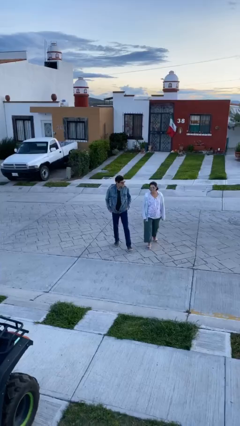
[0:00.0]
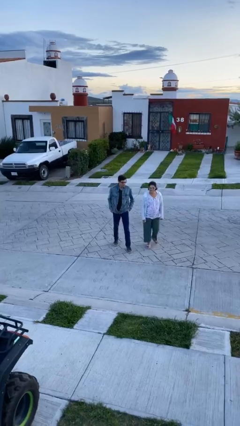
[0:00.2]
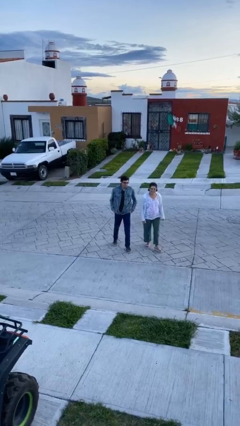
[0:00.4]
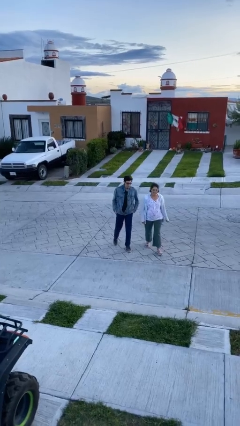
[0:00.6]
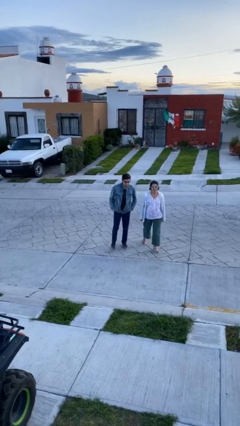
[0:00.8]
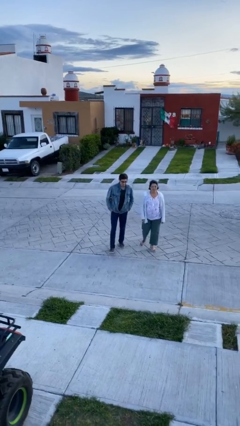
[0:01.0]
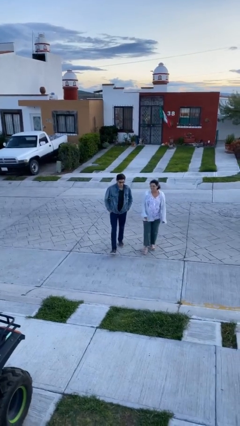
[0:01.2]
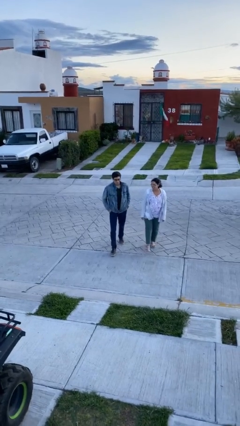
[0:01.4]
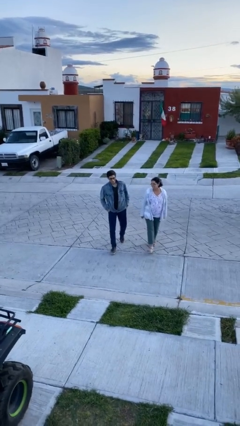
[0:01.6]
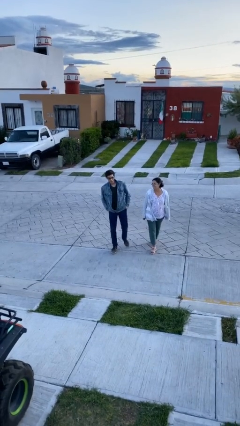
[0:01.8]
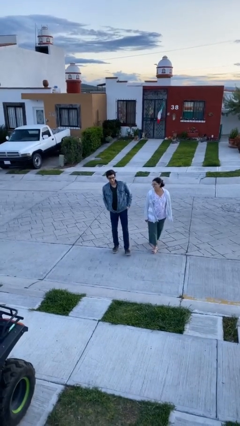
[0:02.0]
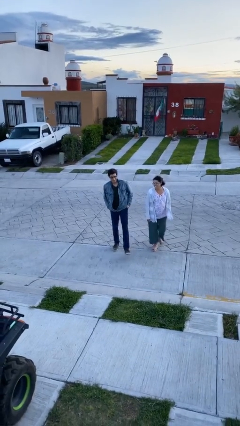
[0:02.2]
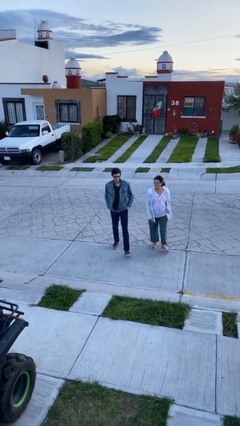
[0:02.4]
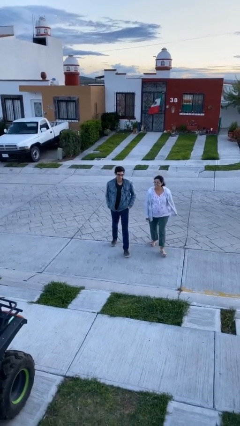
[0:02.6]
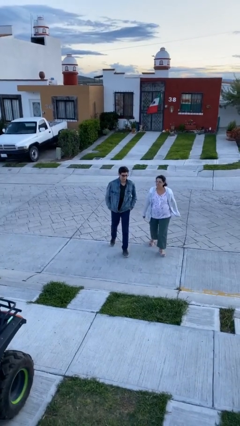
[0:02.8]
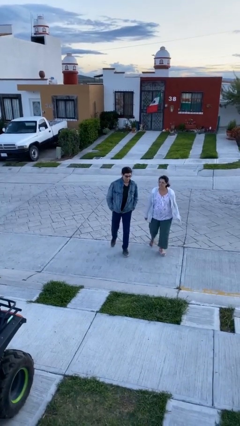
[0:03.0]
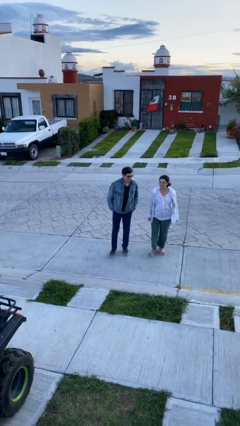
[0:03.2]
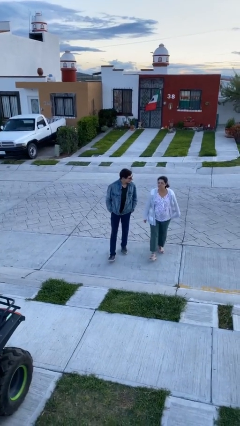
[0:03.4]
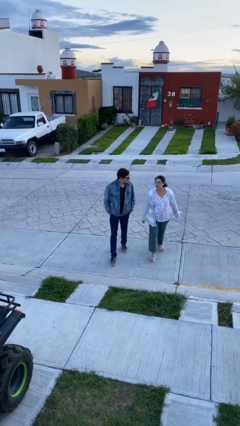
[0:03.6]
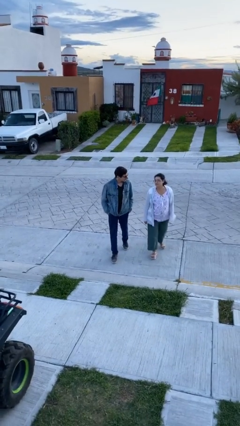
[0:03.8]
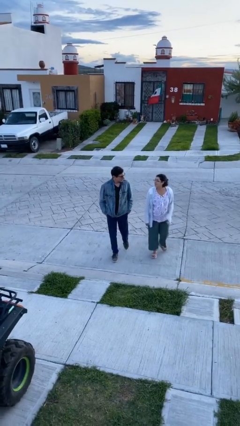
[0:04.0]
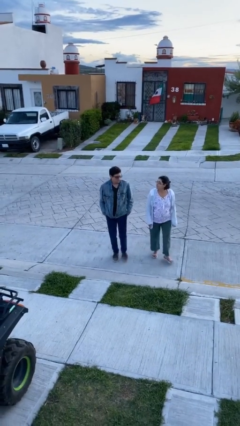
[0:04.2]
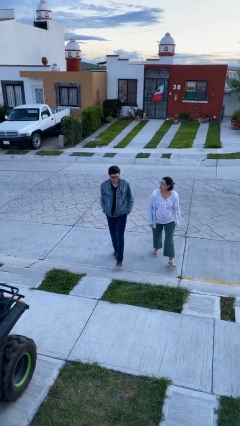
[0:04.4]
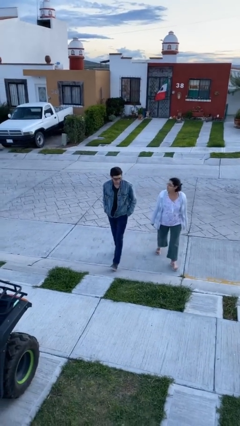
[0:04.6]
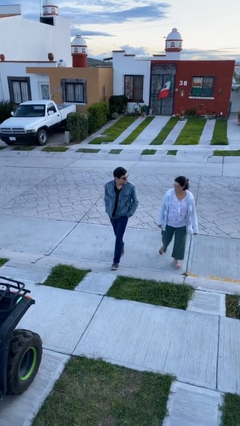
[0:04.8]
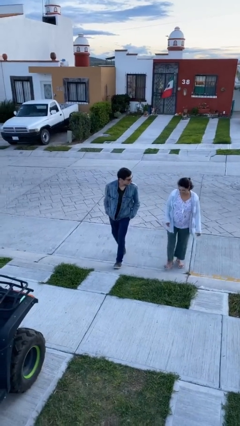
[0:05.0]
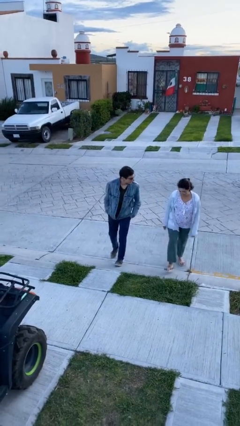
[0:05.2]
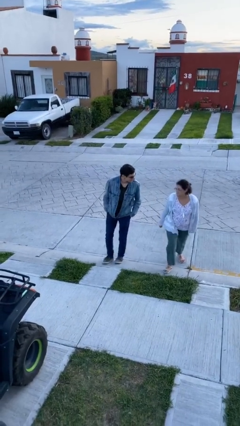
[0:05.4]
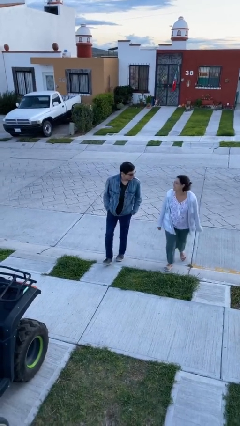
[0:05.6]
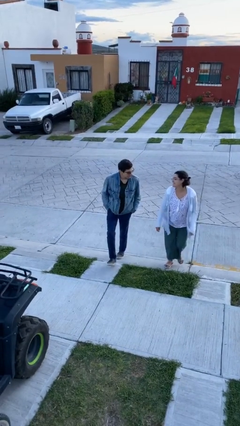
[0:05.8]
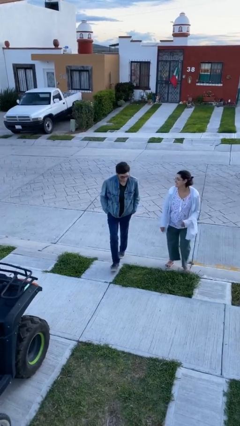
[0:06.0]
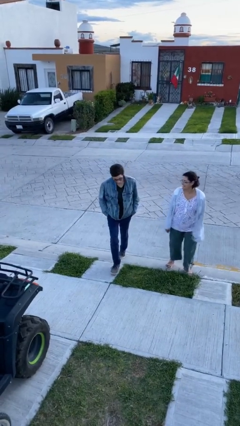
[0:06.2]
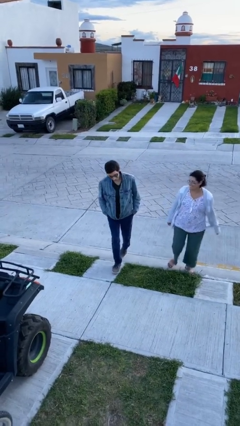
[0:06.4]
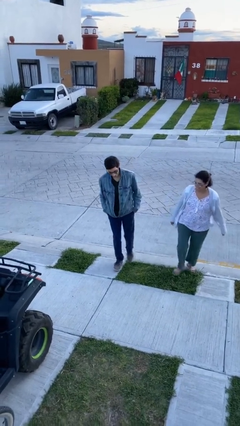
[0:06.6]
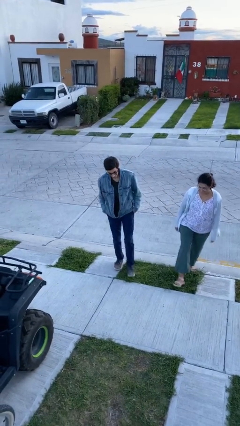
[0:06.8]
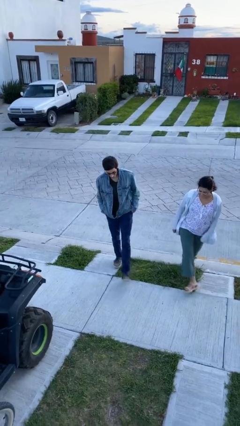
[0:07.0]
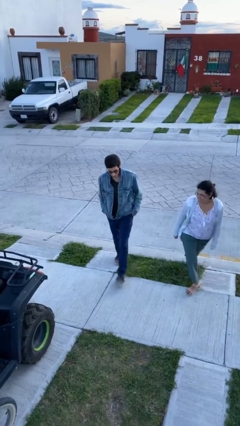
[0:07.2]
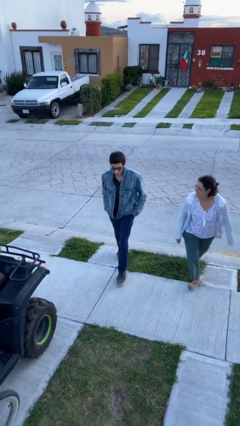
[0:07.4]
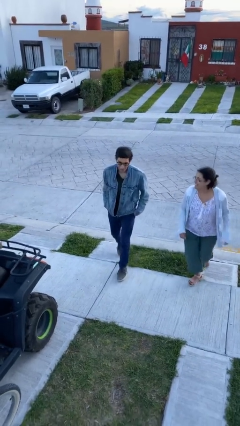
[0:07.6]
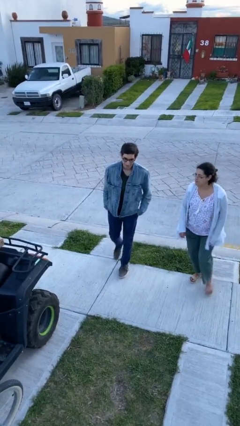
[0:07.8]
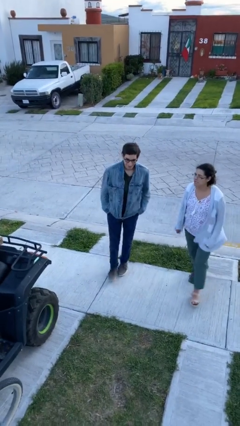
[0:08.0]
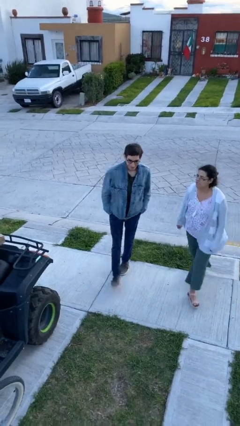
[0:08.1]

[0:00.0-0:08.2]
person talks to person

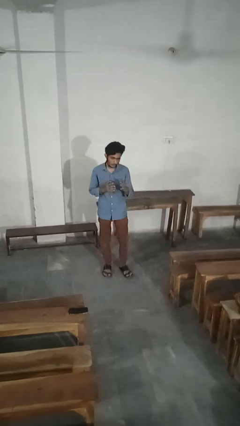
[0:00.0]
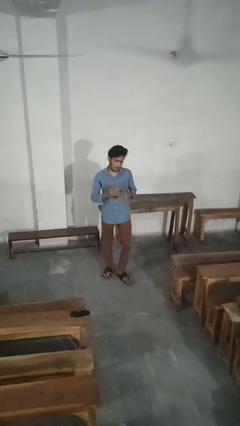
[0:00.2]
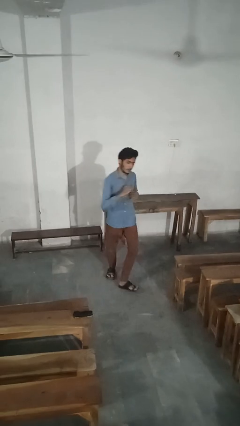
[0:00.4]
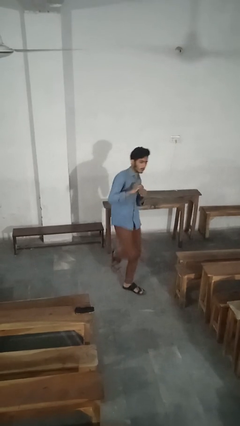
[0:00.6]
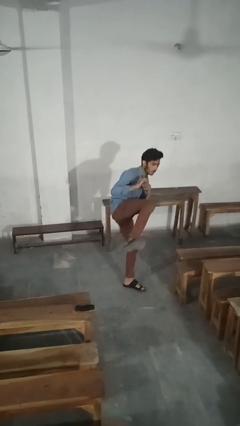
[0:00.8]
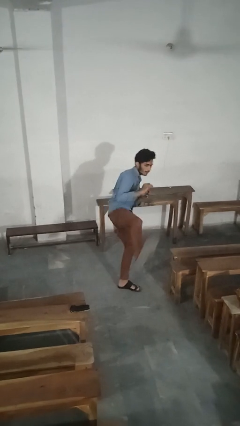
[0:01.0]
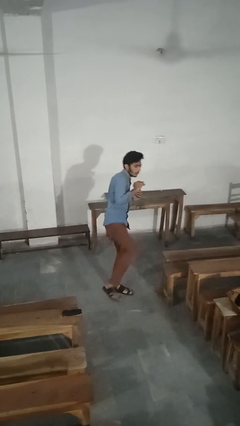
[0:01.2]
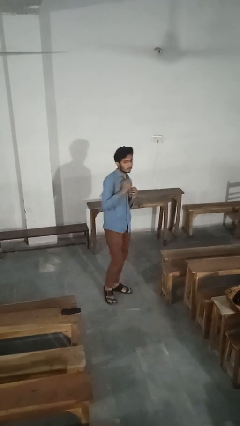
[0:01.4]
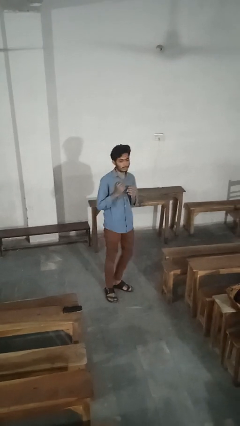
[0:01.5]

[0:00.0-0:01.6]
person karate kicks

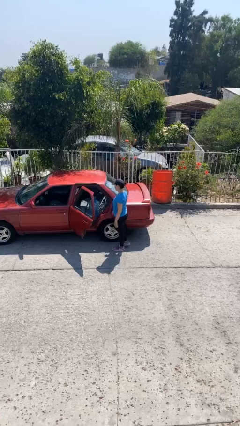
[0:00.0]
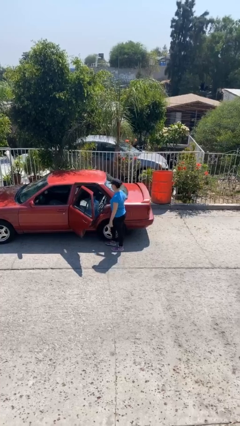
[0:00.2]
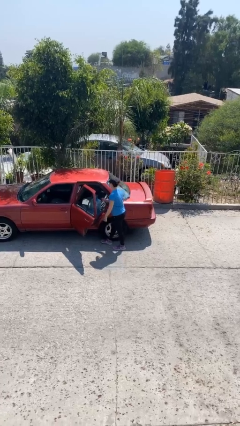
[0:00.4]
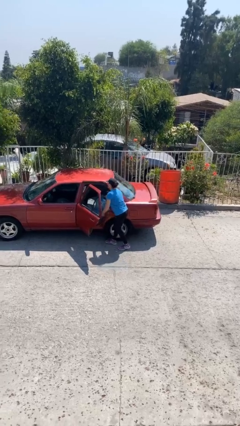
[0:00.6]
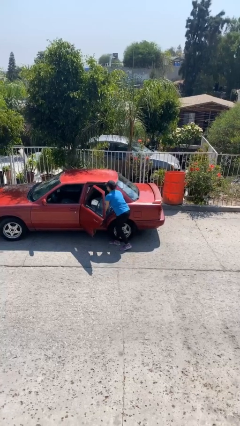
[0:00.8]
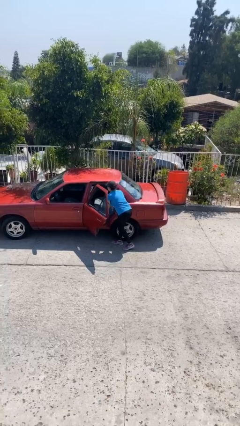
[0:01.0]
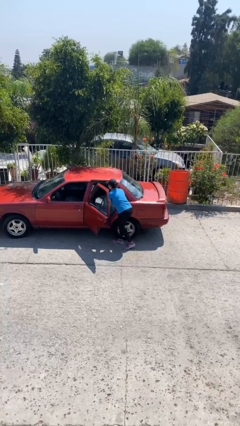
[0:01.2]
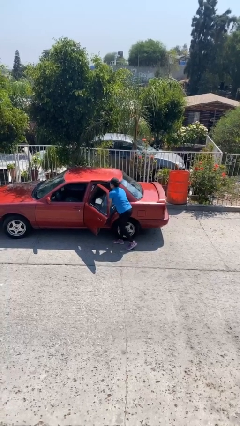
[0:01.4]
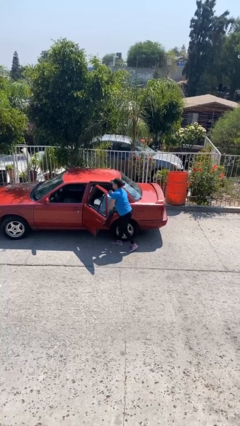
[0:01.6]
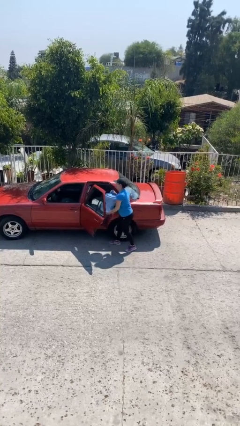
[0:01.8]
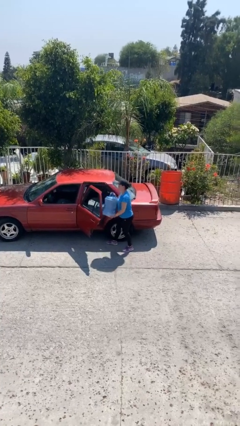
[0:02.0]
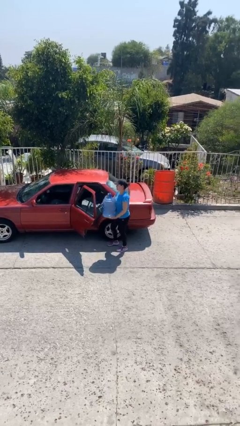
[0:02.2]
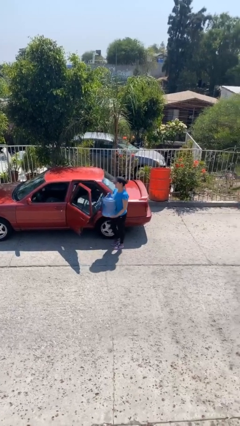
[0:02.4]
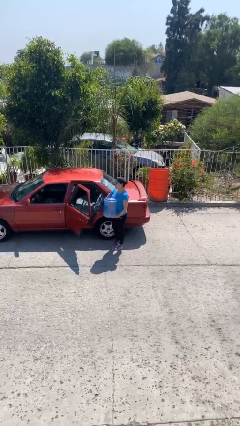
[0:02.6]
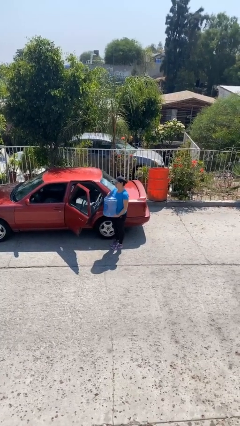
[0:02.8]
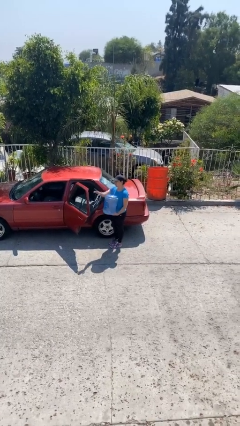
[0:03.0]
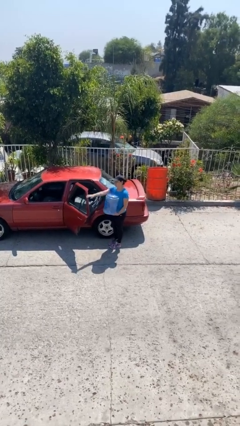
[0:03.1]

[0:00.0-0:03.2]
person unloads car

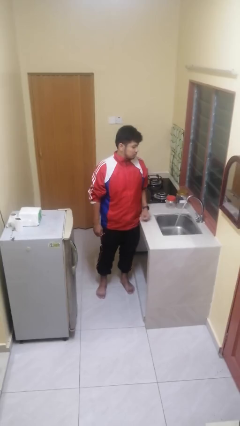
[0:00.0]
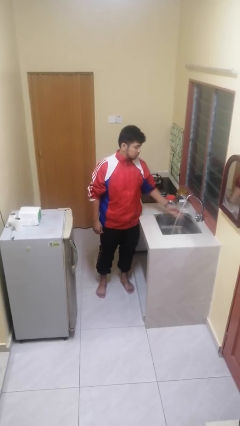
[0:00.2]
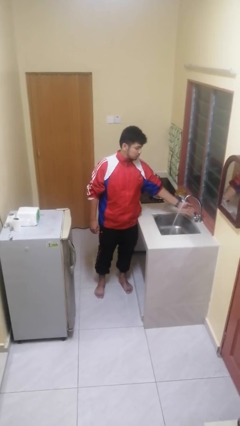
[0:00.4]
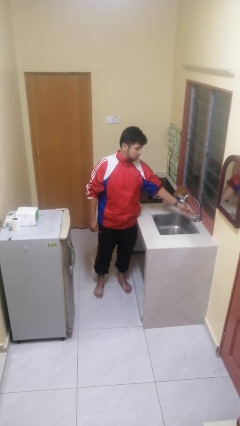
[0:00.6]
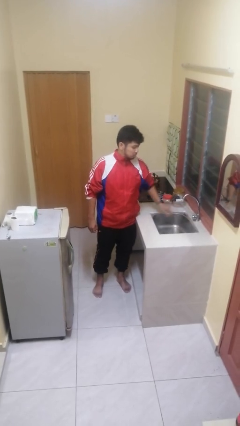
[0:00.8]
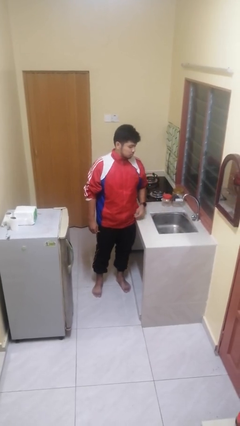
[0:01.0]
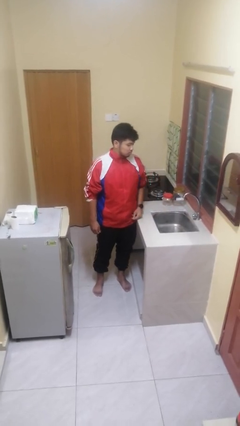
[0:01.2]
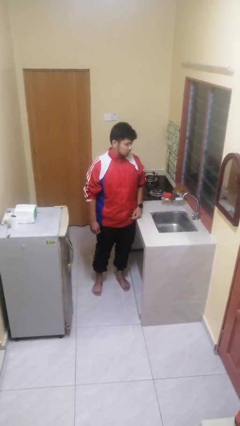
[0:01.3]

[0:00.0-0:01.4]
person turns off faucet

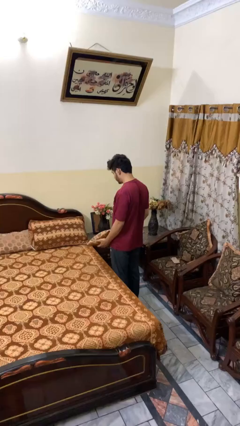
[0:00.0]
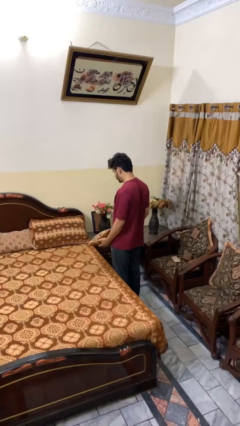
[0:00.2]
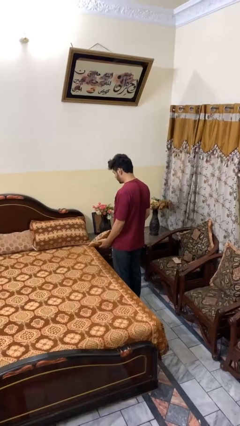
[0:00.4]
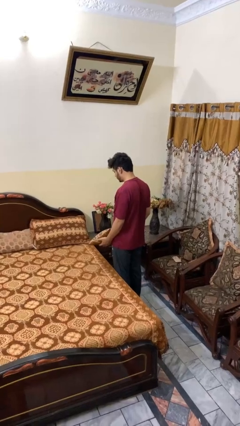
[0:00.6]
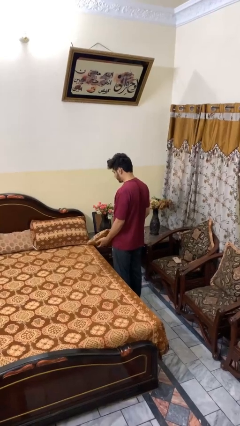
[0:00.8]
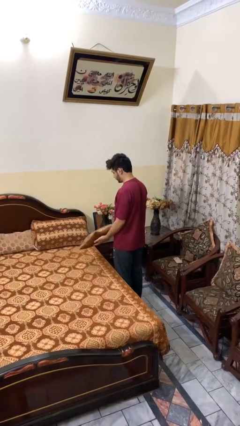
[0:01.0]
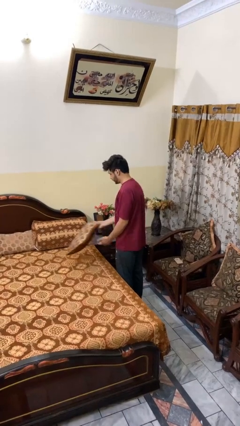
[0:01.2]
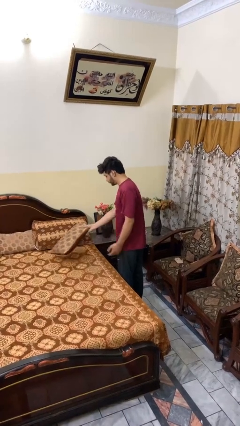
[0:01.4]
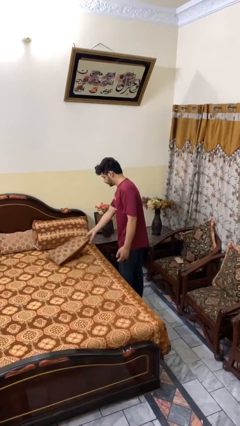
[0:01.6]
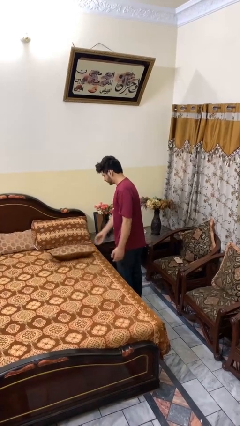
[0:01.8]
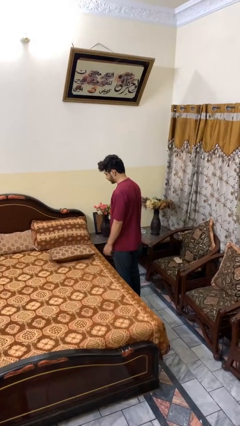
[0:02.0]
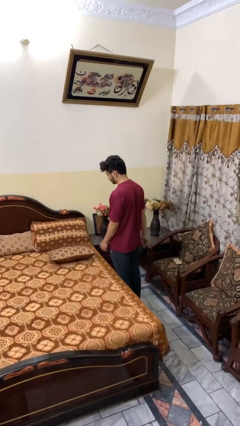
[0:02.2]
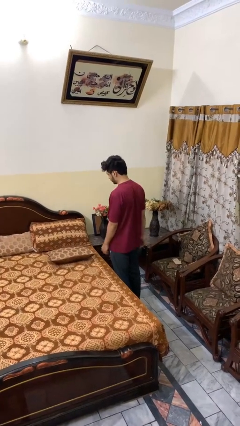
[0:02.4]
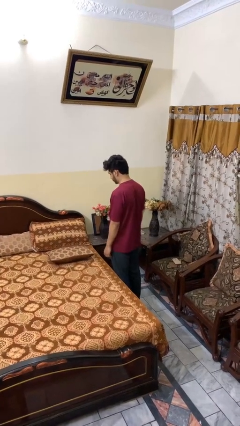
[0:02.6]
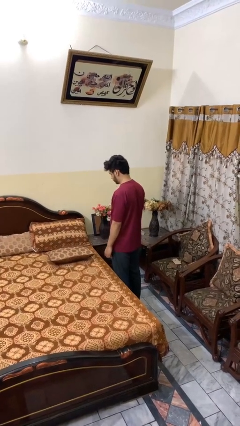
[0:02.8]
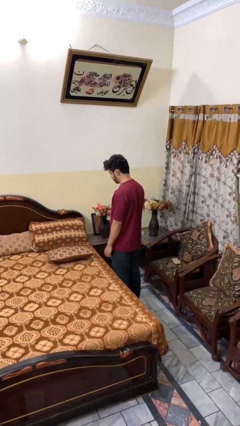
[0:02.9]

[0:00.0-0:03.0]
person puts down object on bed

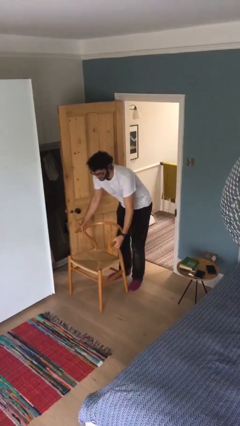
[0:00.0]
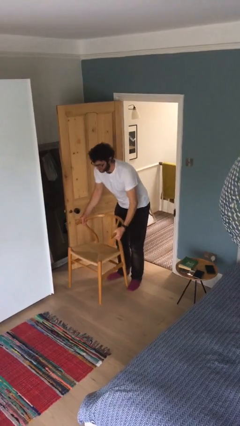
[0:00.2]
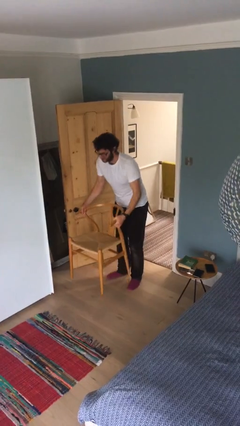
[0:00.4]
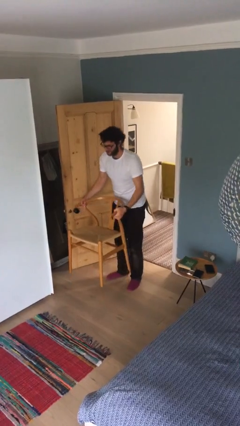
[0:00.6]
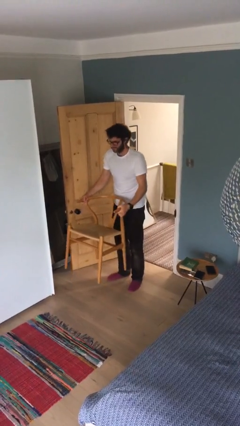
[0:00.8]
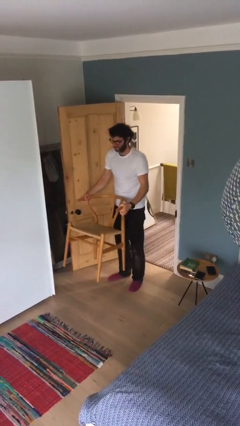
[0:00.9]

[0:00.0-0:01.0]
person picks up object from floor
